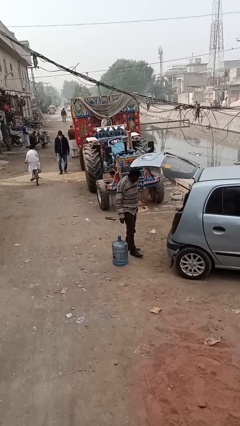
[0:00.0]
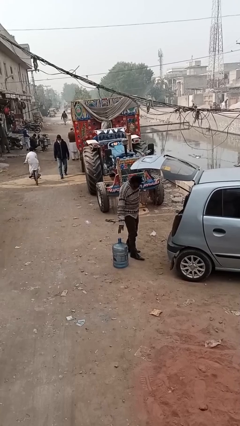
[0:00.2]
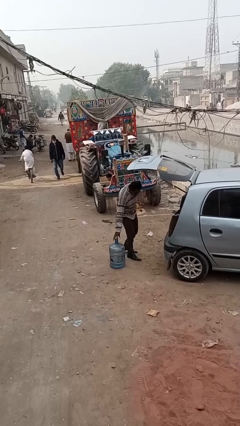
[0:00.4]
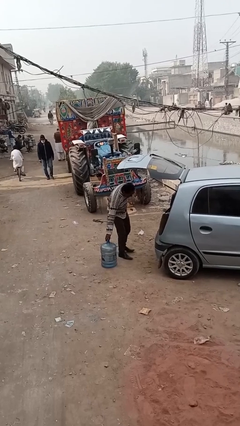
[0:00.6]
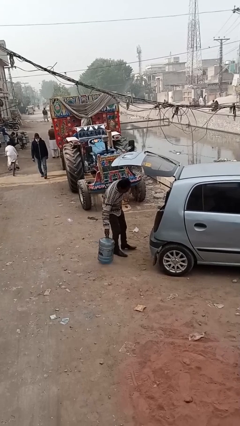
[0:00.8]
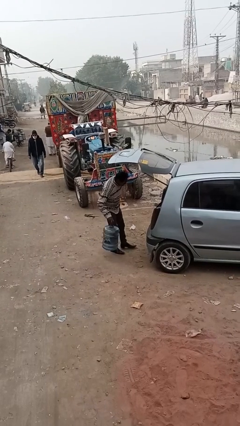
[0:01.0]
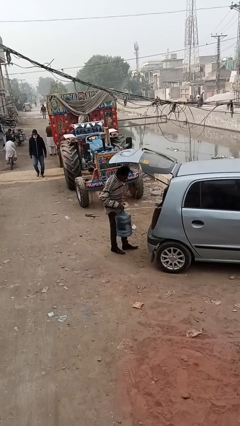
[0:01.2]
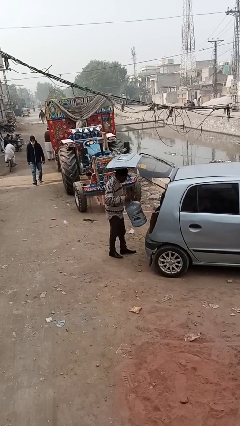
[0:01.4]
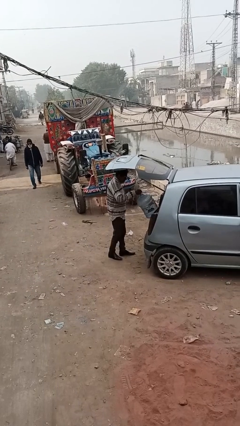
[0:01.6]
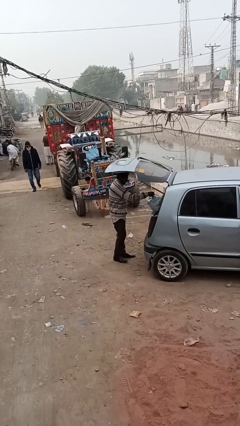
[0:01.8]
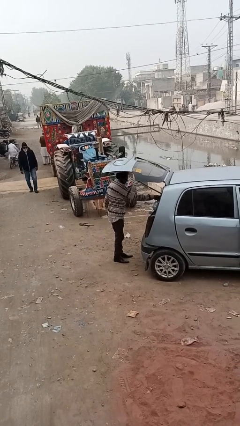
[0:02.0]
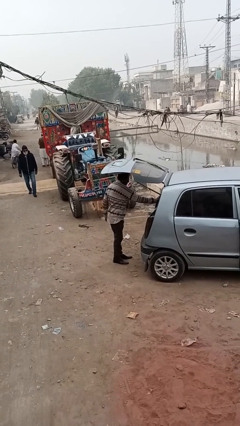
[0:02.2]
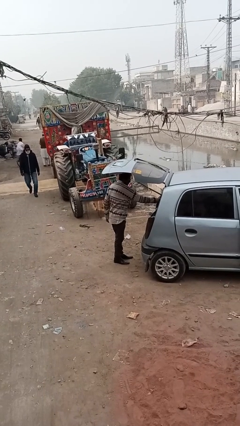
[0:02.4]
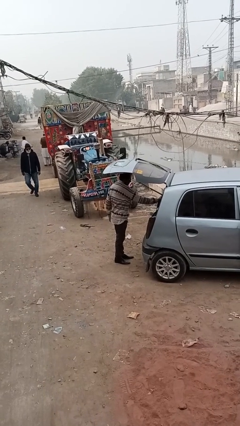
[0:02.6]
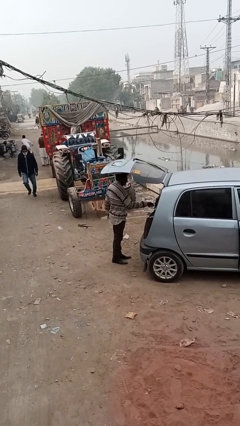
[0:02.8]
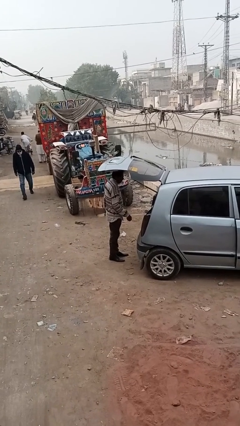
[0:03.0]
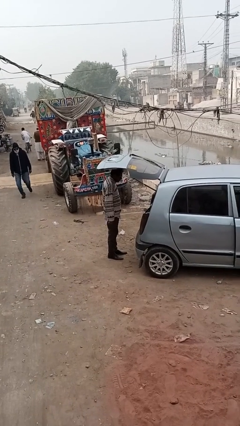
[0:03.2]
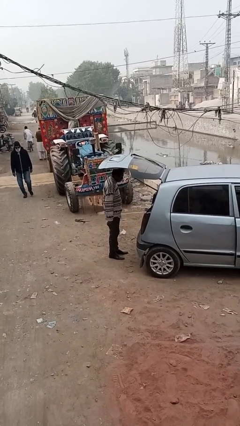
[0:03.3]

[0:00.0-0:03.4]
person loads car

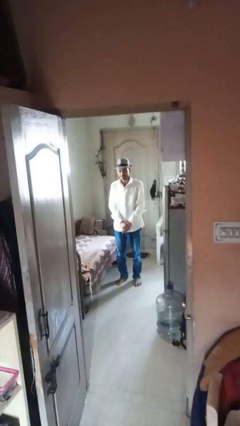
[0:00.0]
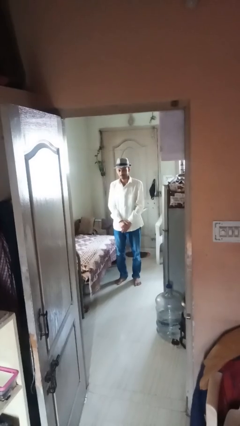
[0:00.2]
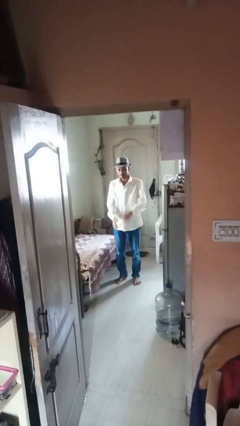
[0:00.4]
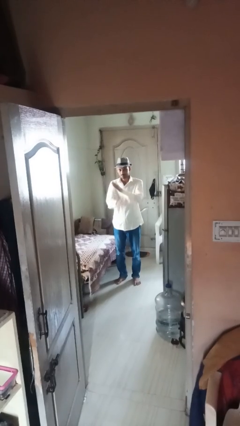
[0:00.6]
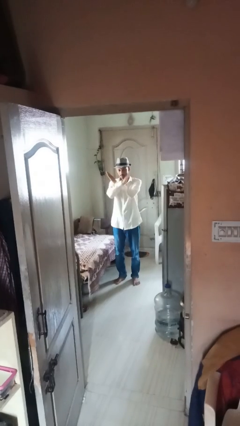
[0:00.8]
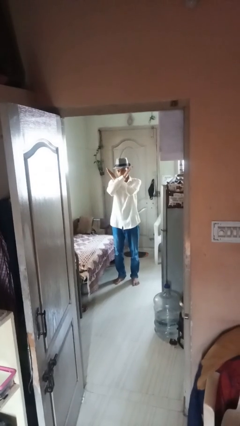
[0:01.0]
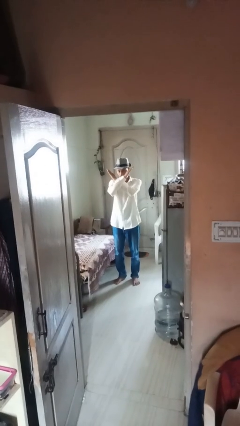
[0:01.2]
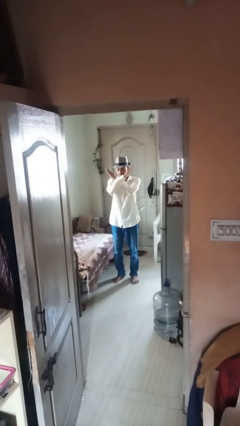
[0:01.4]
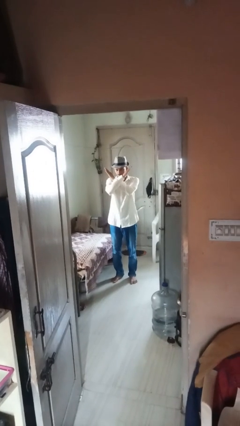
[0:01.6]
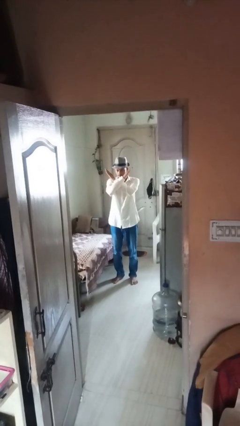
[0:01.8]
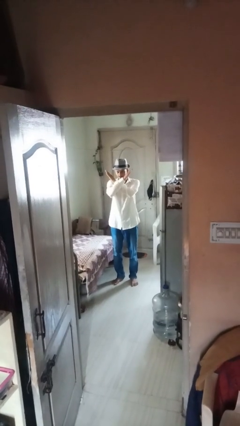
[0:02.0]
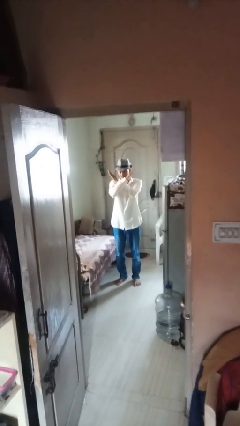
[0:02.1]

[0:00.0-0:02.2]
person gestures arms x

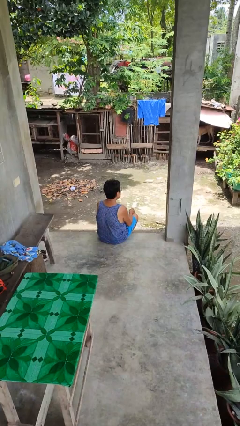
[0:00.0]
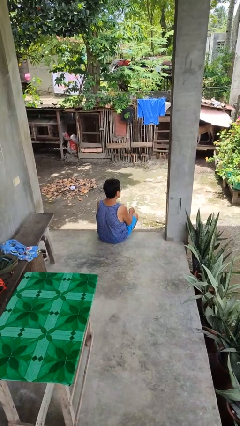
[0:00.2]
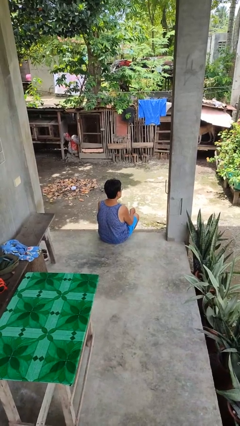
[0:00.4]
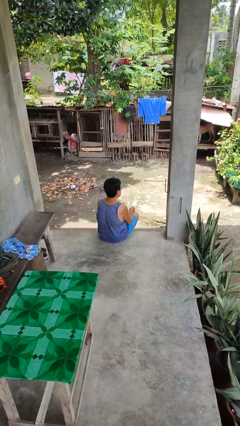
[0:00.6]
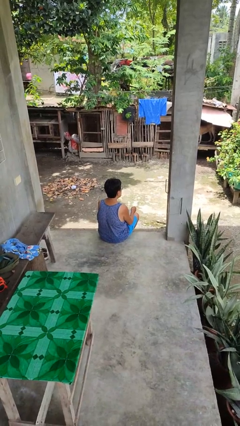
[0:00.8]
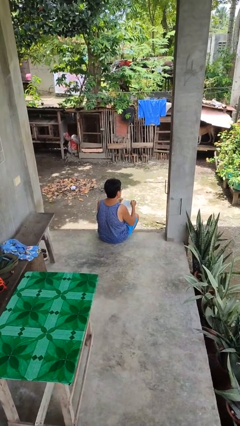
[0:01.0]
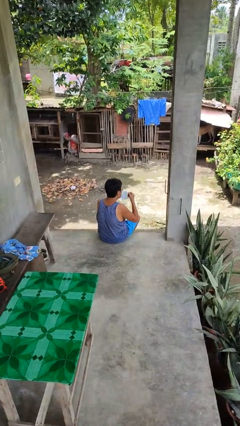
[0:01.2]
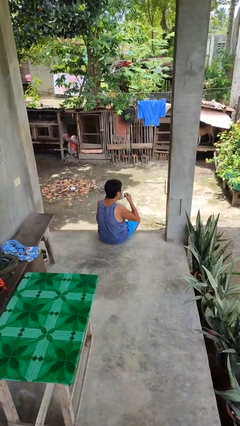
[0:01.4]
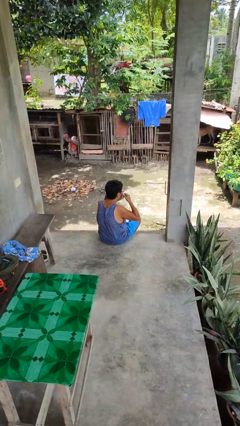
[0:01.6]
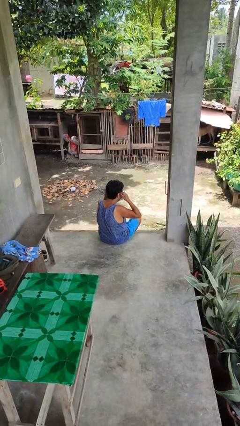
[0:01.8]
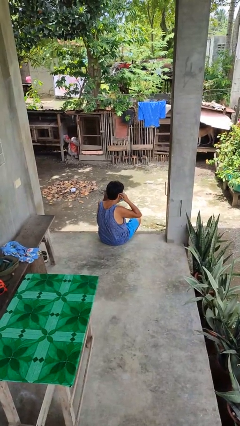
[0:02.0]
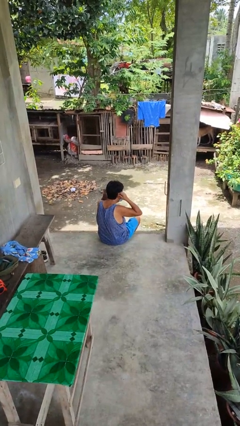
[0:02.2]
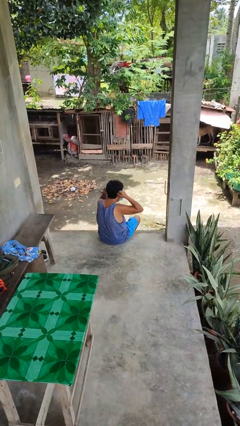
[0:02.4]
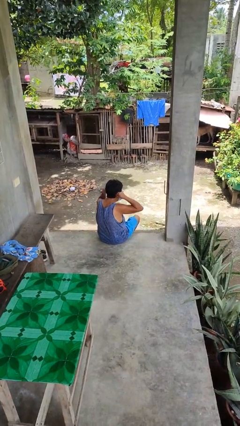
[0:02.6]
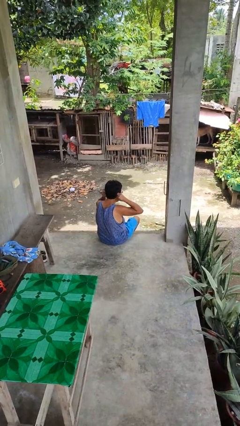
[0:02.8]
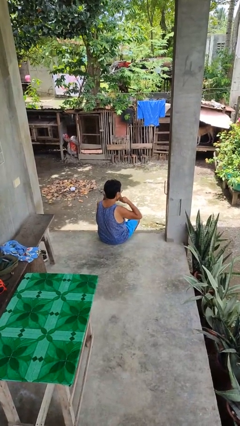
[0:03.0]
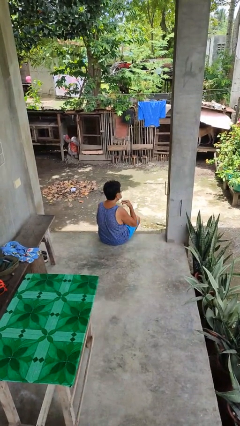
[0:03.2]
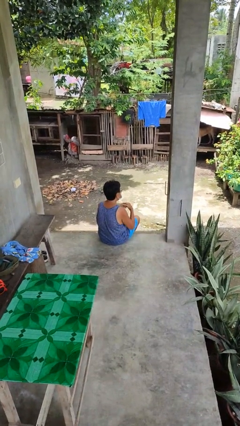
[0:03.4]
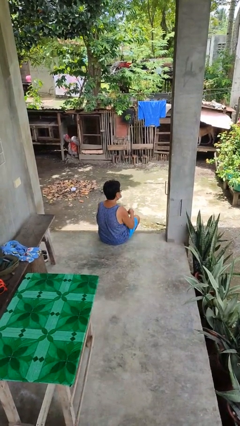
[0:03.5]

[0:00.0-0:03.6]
person puts on facemask

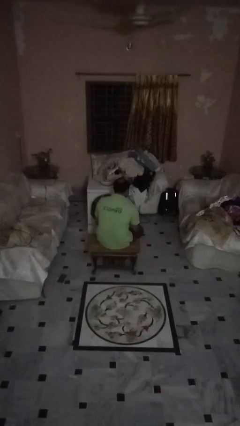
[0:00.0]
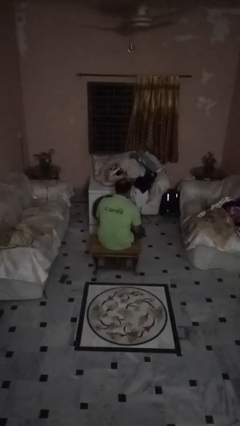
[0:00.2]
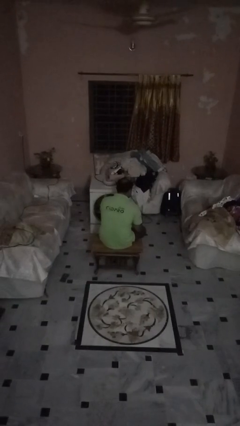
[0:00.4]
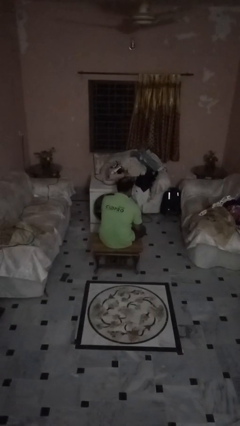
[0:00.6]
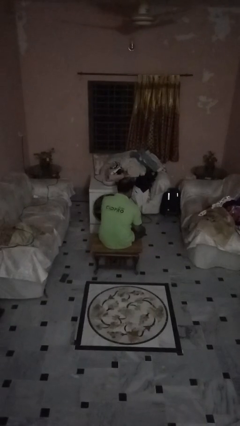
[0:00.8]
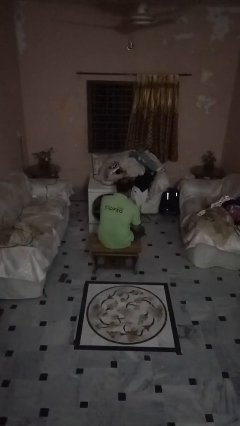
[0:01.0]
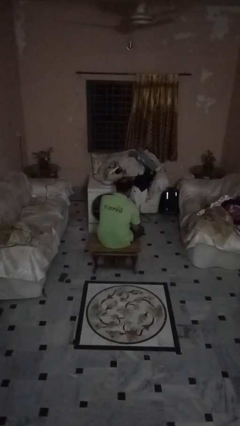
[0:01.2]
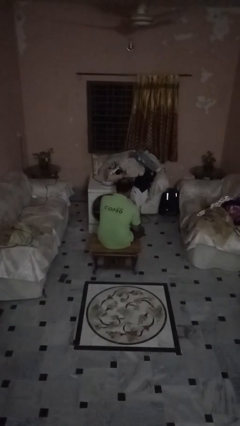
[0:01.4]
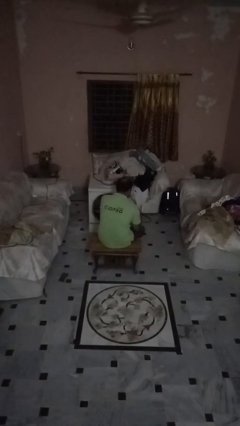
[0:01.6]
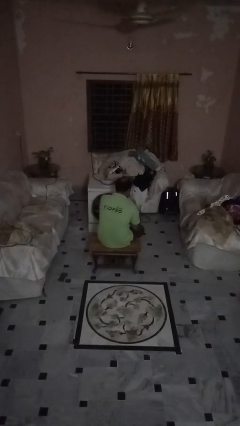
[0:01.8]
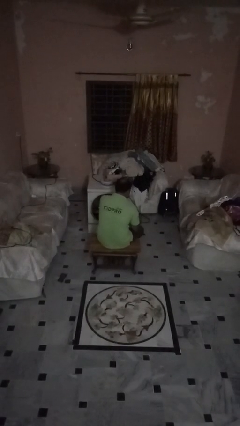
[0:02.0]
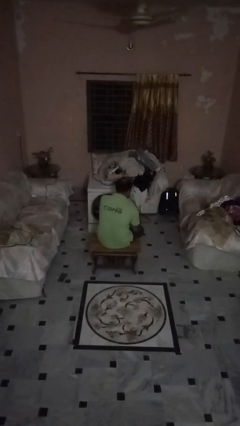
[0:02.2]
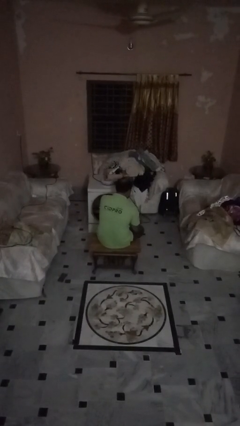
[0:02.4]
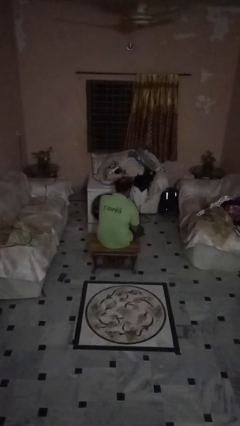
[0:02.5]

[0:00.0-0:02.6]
person opens beverage can

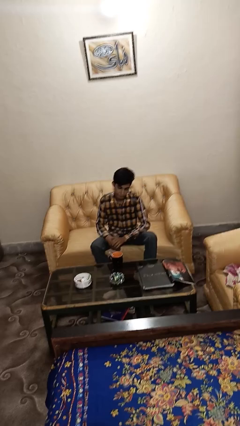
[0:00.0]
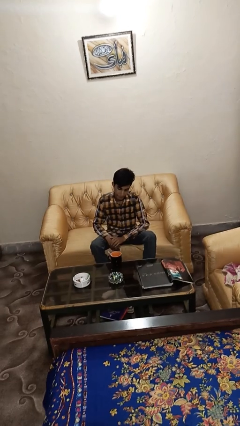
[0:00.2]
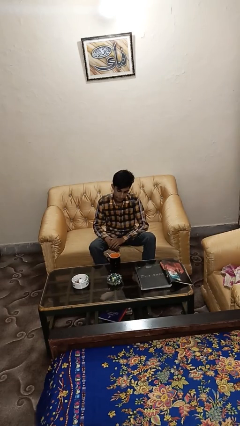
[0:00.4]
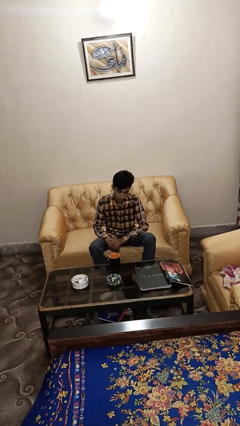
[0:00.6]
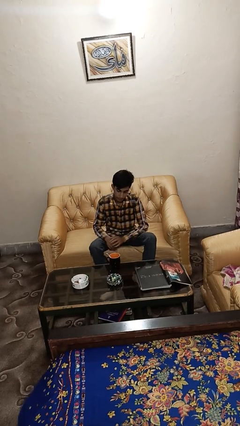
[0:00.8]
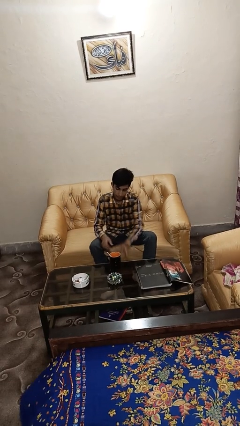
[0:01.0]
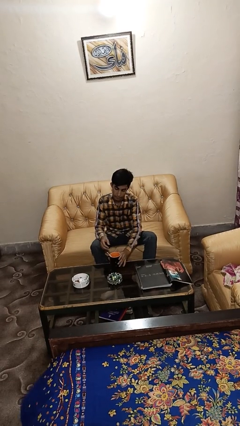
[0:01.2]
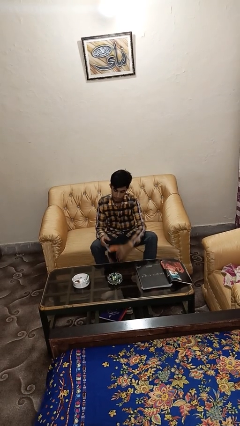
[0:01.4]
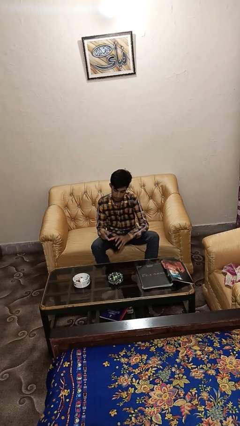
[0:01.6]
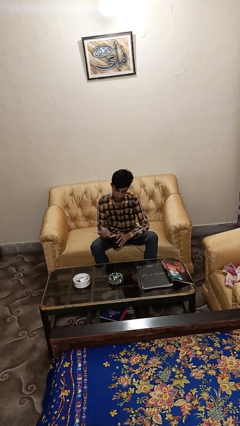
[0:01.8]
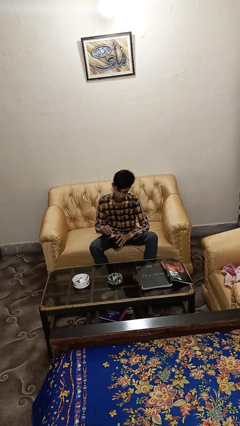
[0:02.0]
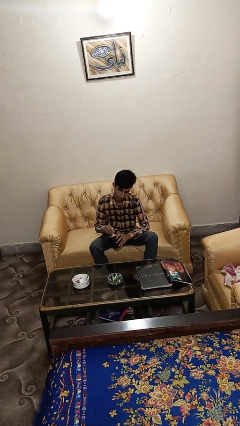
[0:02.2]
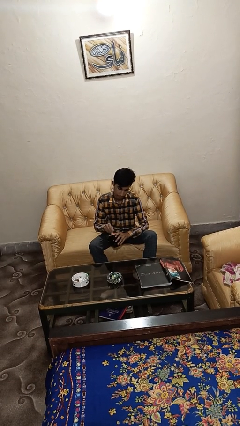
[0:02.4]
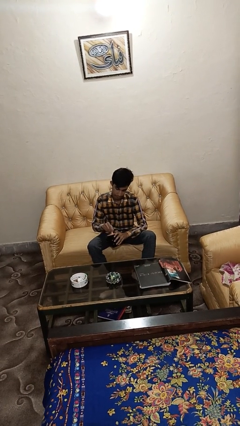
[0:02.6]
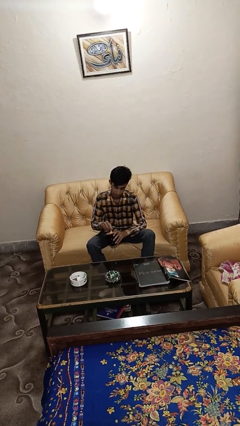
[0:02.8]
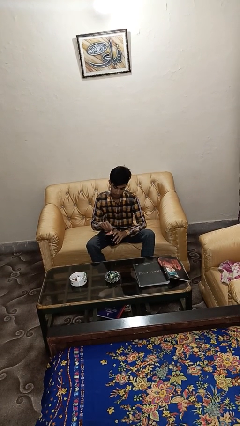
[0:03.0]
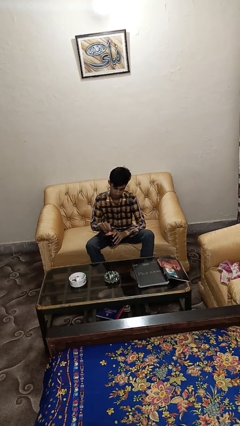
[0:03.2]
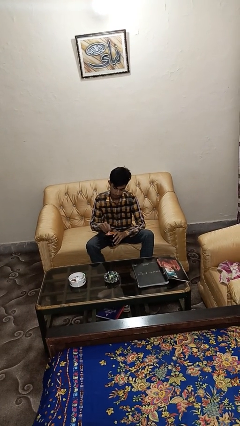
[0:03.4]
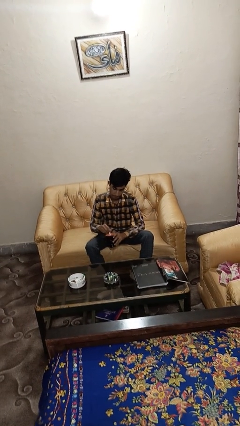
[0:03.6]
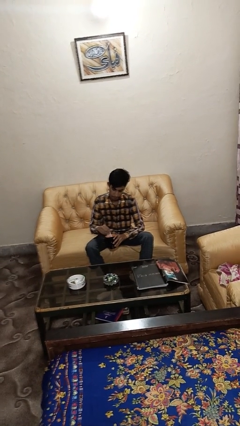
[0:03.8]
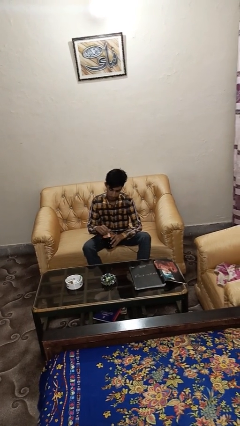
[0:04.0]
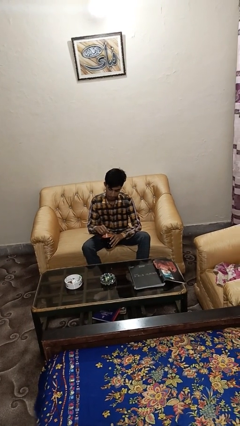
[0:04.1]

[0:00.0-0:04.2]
person stirs mug

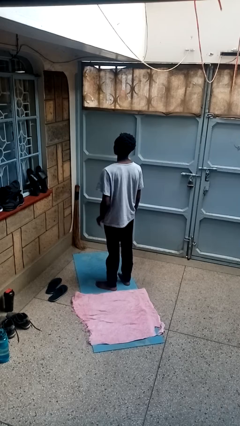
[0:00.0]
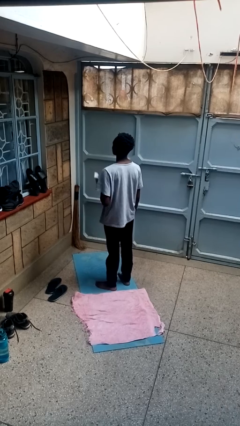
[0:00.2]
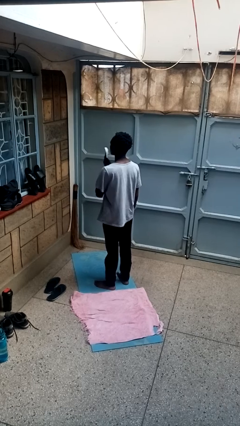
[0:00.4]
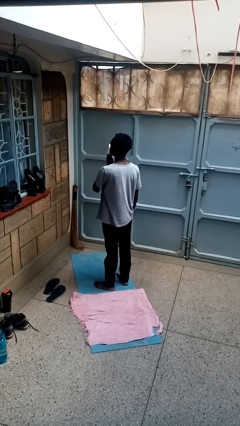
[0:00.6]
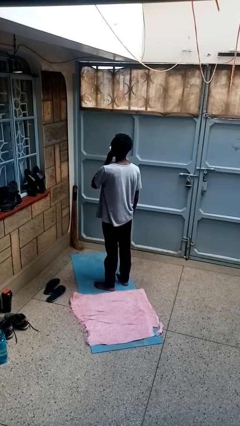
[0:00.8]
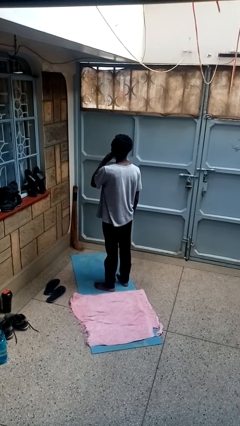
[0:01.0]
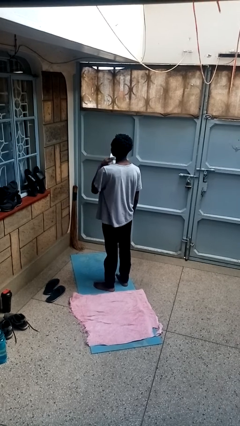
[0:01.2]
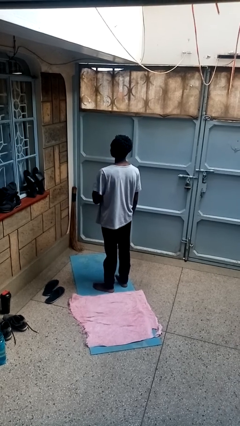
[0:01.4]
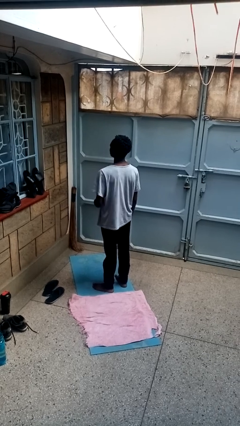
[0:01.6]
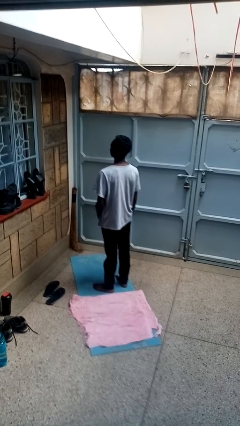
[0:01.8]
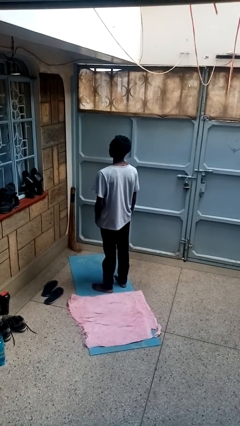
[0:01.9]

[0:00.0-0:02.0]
person wipes mouth with napkin
